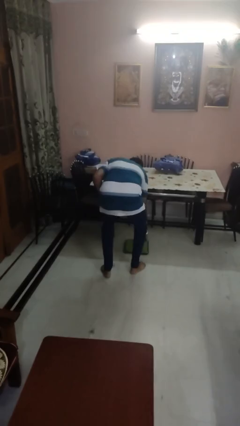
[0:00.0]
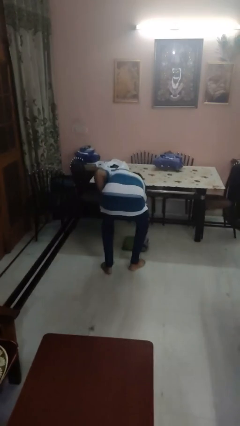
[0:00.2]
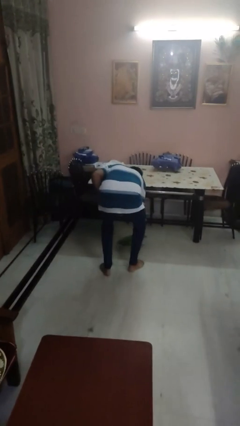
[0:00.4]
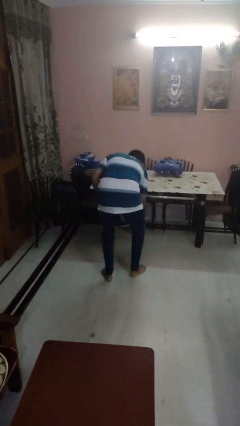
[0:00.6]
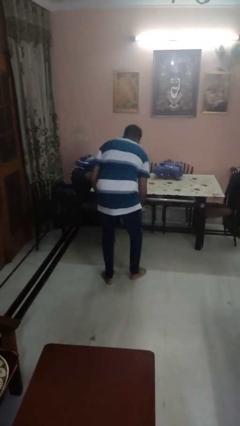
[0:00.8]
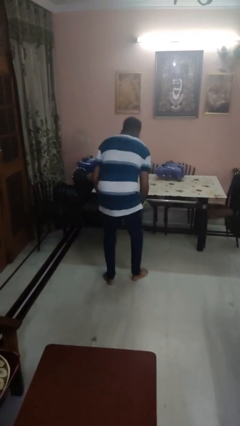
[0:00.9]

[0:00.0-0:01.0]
person picks up object from floor

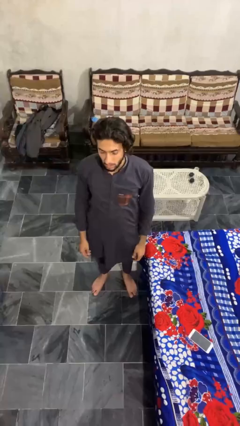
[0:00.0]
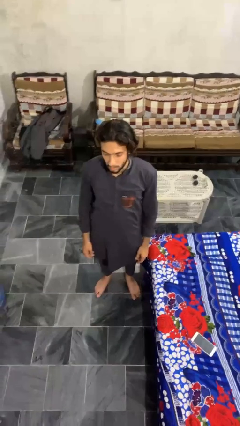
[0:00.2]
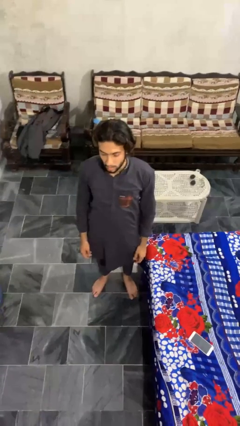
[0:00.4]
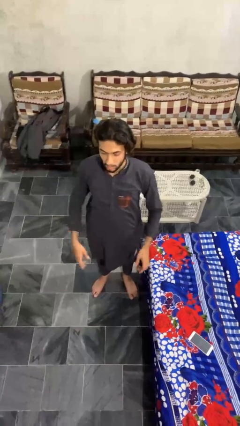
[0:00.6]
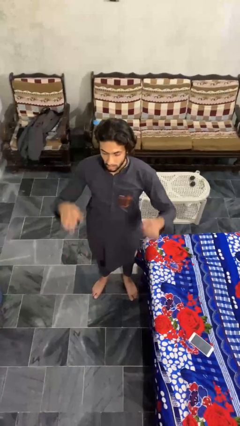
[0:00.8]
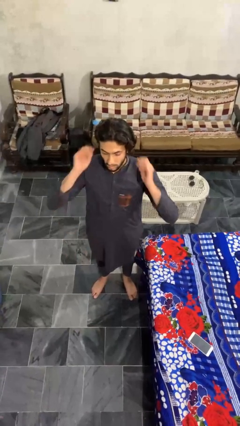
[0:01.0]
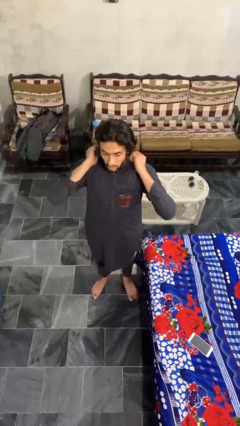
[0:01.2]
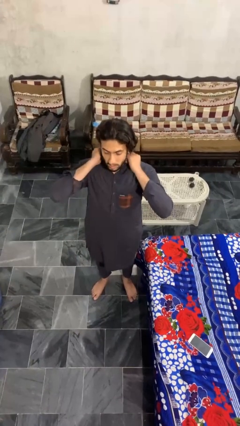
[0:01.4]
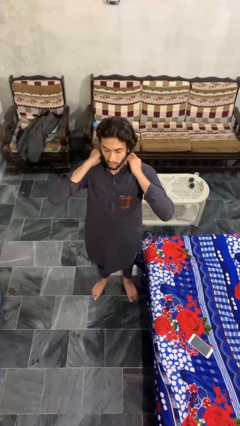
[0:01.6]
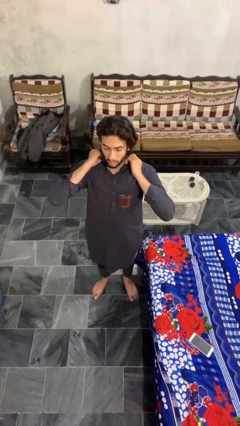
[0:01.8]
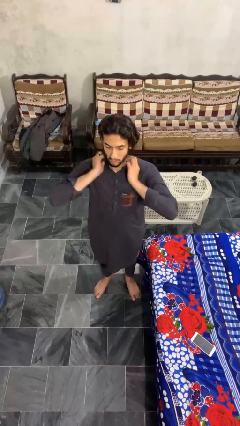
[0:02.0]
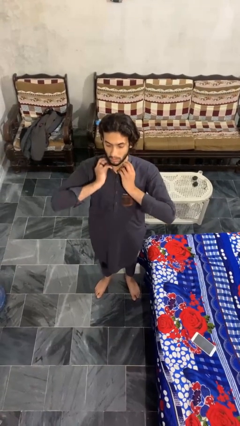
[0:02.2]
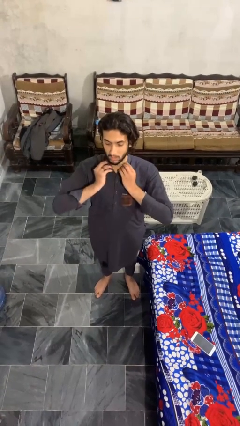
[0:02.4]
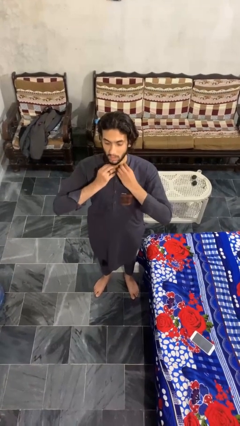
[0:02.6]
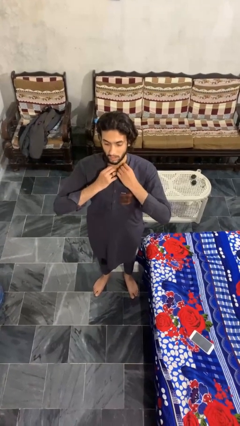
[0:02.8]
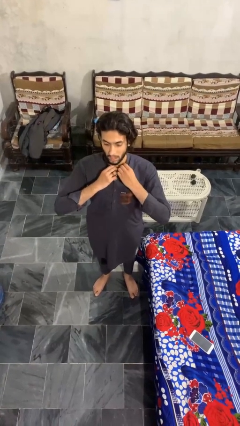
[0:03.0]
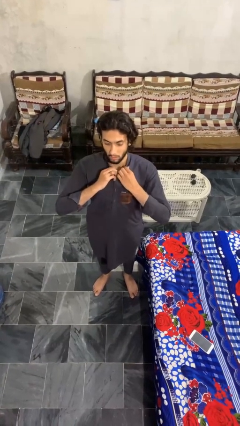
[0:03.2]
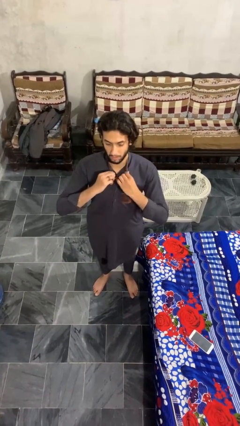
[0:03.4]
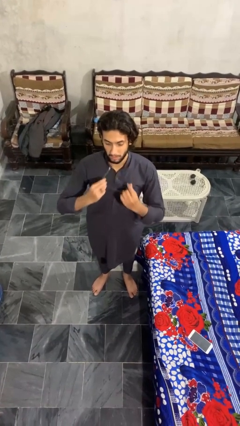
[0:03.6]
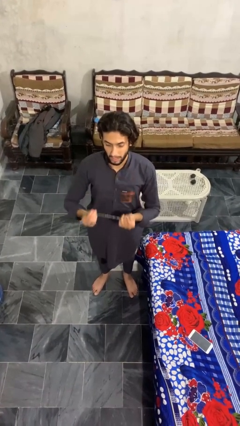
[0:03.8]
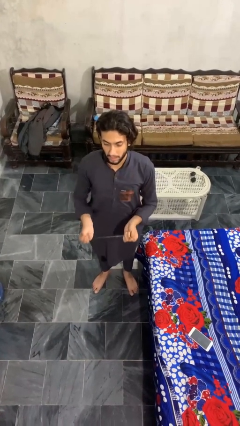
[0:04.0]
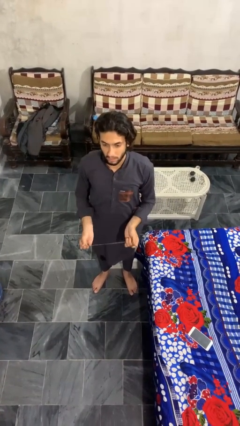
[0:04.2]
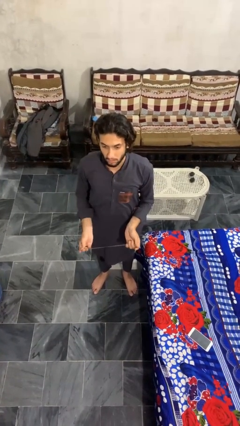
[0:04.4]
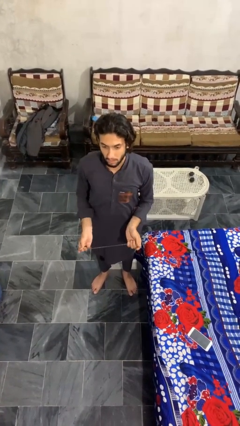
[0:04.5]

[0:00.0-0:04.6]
person takes off necklace

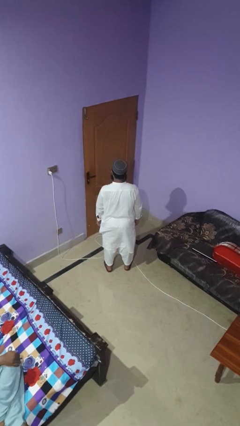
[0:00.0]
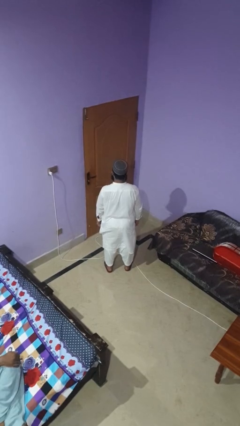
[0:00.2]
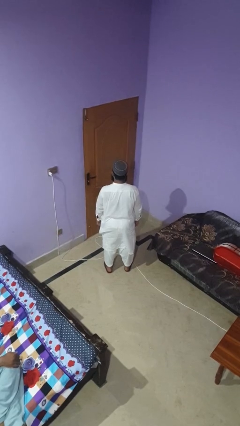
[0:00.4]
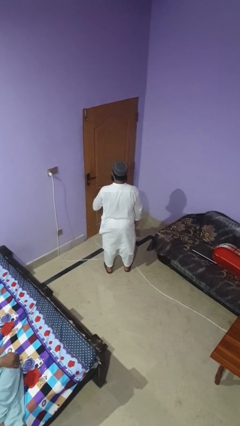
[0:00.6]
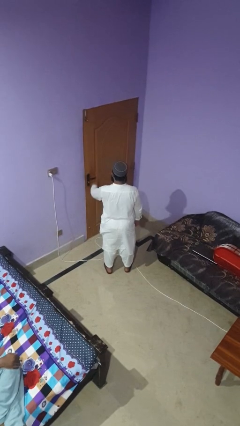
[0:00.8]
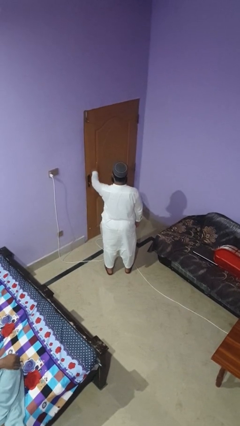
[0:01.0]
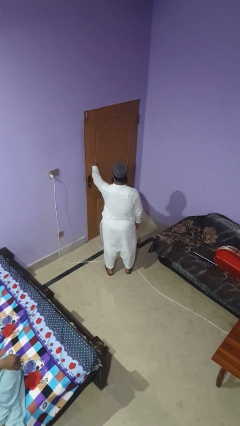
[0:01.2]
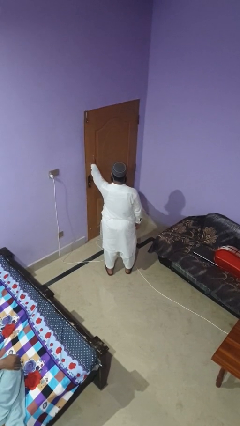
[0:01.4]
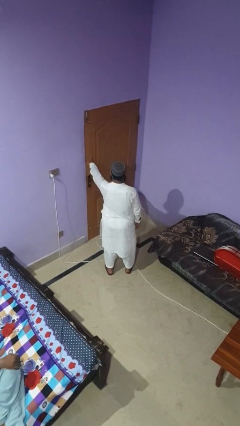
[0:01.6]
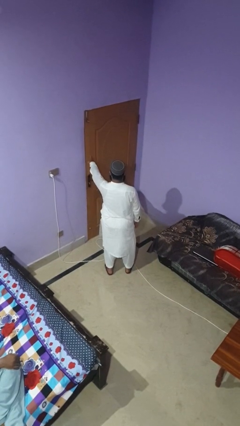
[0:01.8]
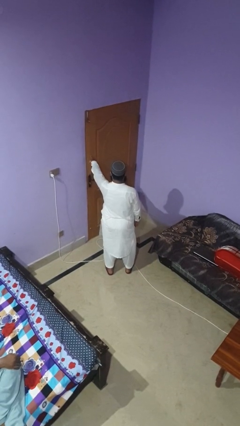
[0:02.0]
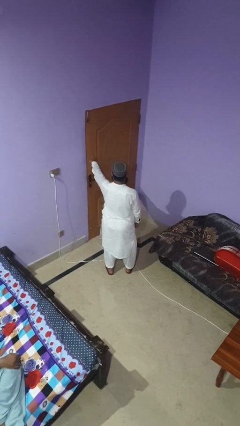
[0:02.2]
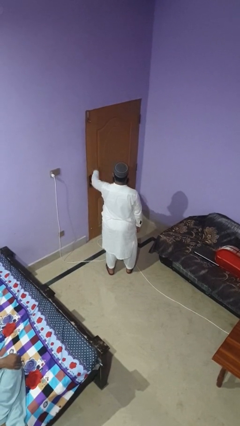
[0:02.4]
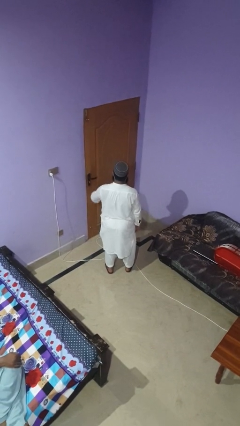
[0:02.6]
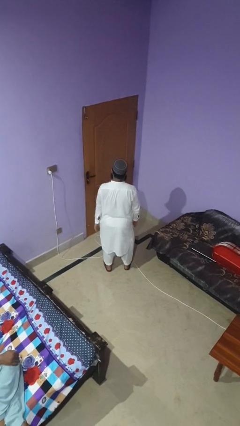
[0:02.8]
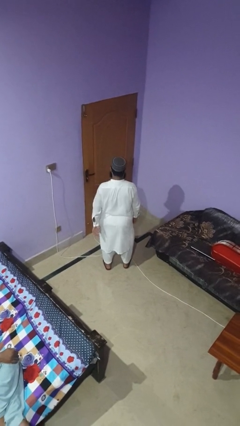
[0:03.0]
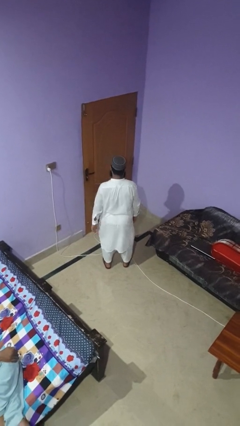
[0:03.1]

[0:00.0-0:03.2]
person taps object with finger

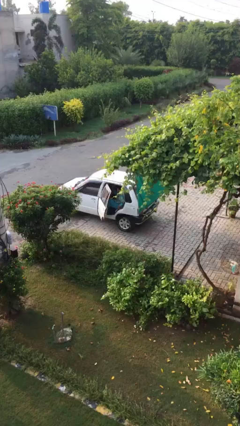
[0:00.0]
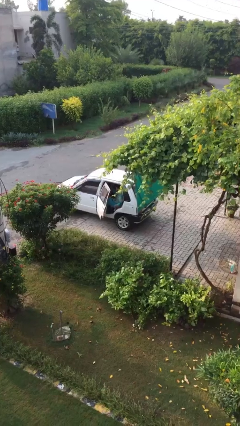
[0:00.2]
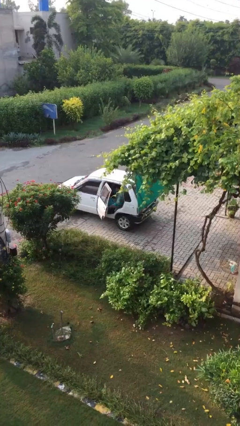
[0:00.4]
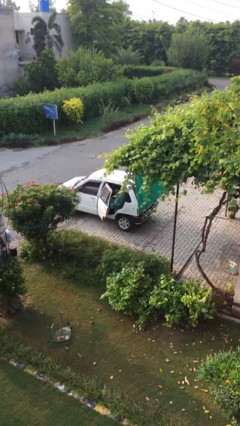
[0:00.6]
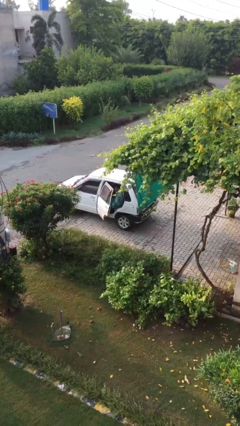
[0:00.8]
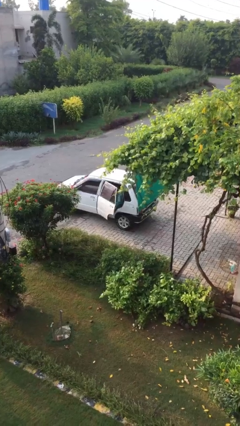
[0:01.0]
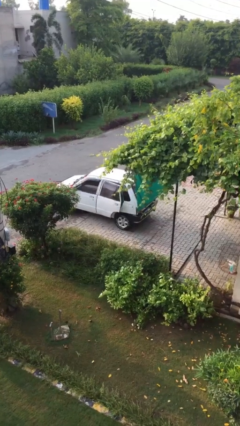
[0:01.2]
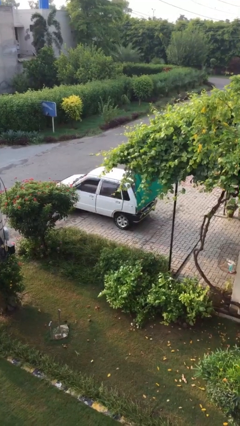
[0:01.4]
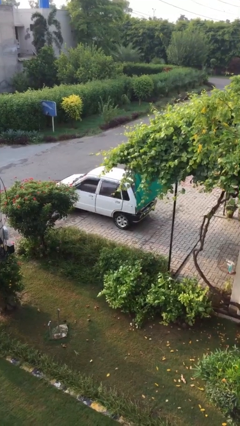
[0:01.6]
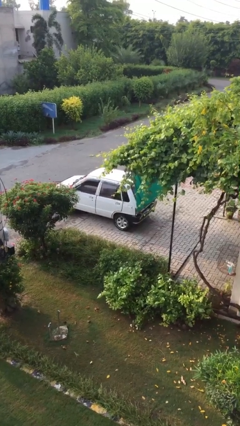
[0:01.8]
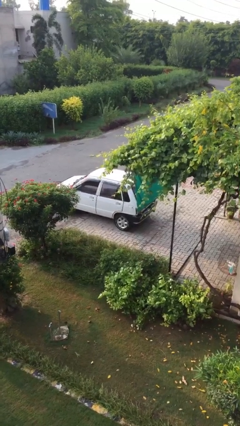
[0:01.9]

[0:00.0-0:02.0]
person closes car door

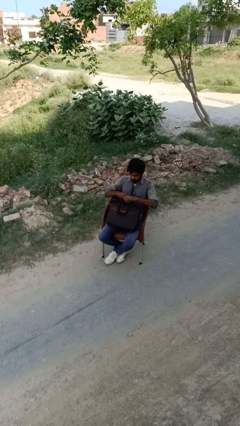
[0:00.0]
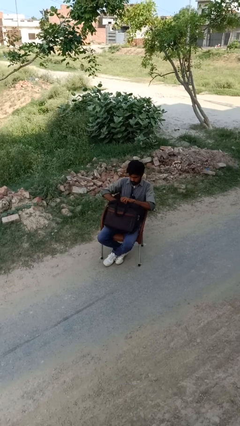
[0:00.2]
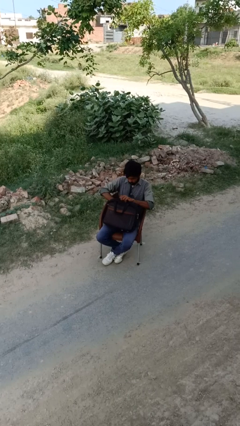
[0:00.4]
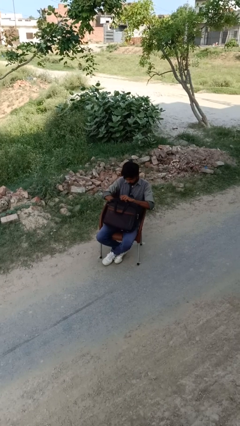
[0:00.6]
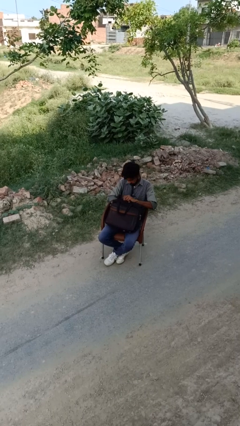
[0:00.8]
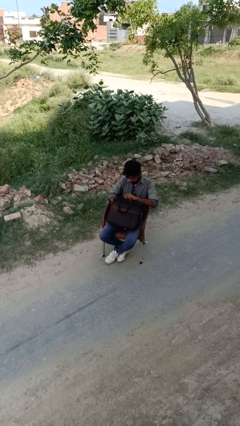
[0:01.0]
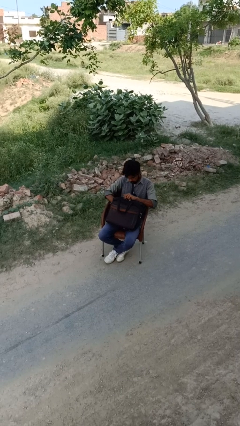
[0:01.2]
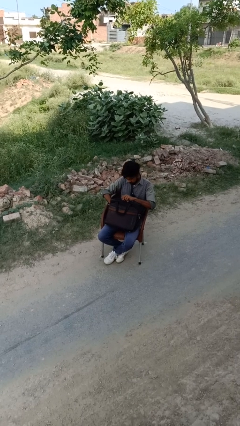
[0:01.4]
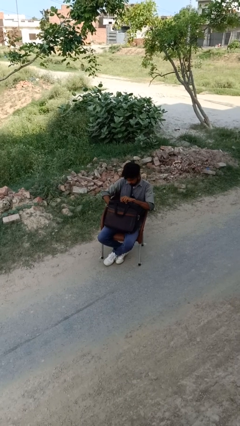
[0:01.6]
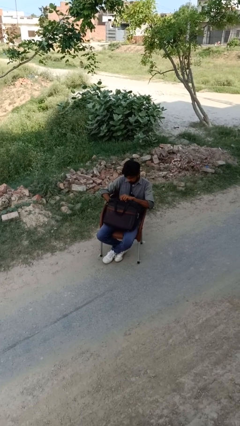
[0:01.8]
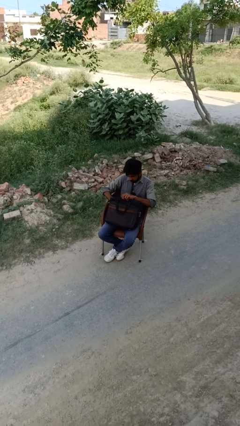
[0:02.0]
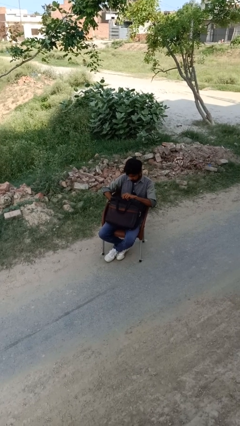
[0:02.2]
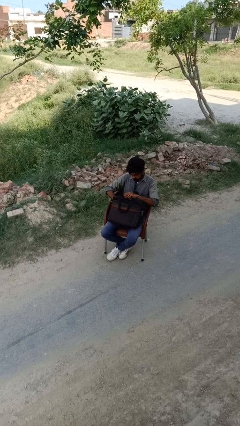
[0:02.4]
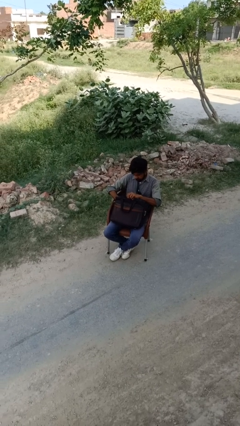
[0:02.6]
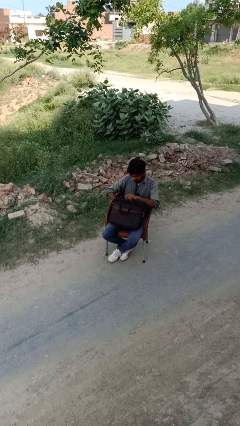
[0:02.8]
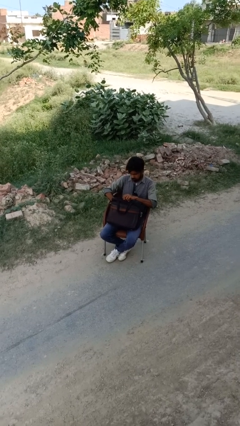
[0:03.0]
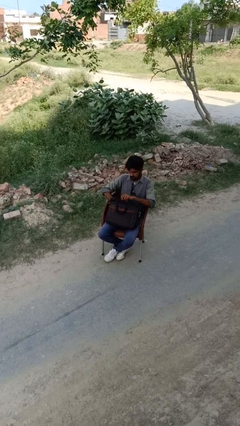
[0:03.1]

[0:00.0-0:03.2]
person searches in backpack

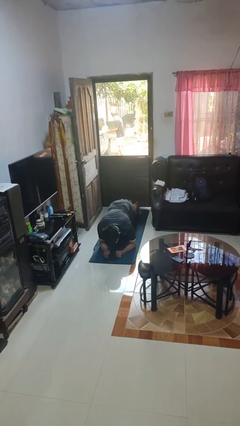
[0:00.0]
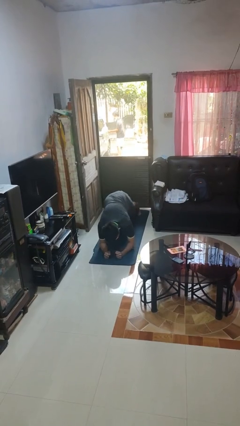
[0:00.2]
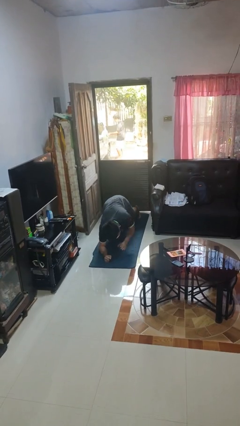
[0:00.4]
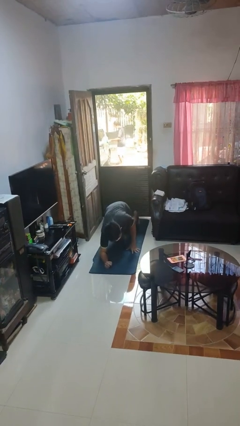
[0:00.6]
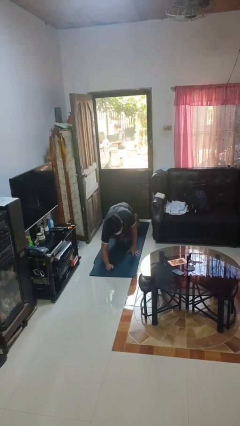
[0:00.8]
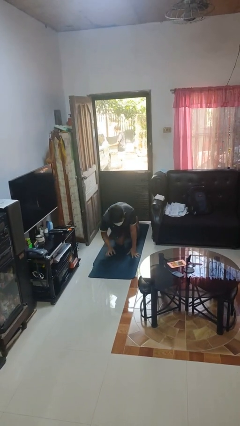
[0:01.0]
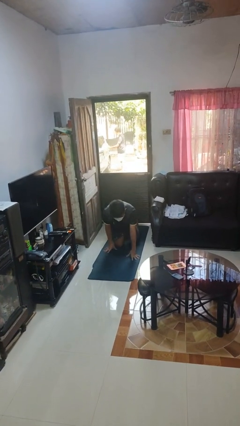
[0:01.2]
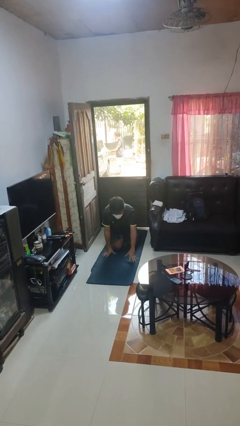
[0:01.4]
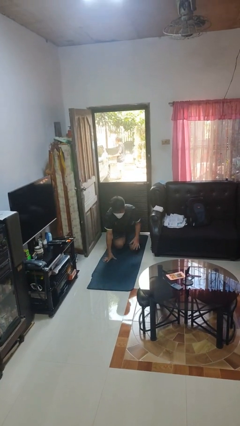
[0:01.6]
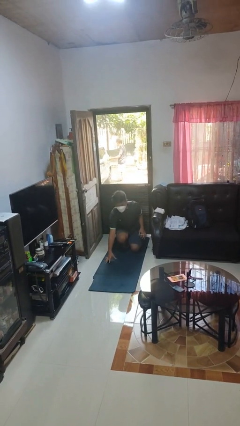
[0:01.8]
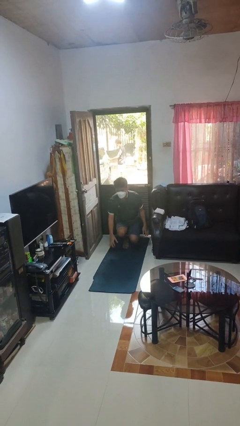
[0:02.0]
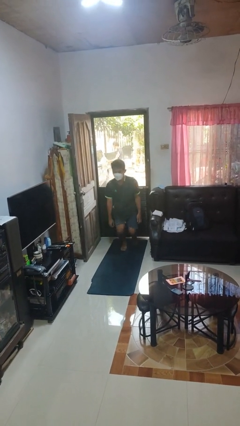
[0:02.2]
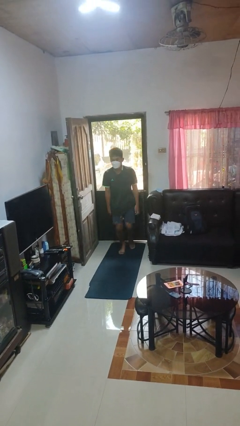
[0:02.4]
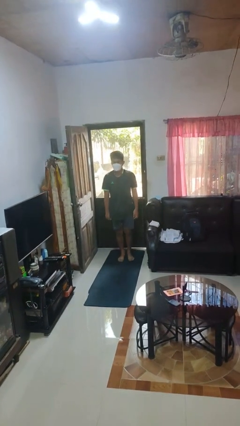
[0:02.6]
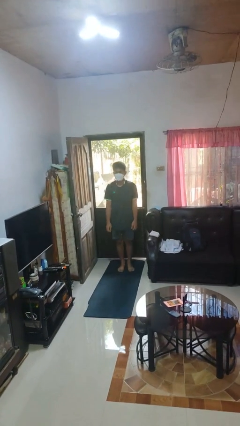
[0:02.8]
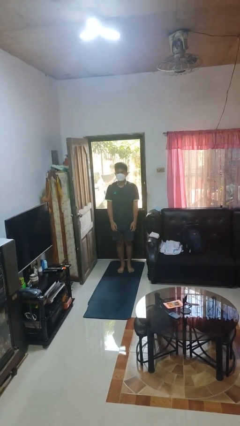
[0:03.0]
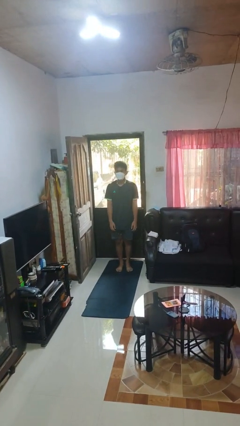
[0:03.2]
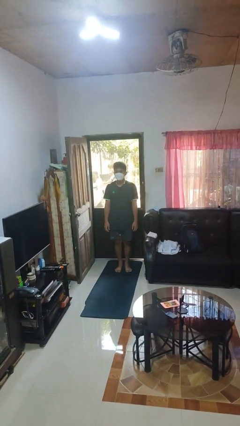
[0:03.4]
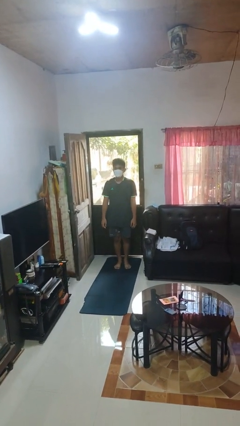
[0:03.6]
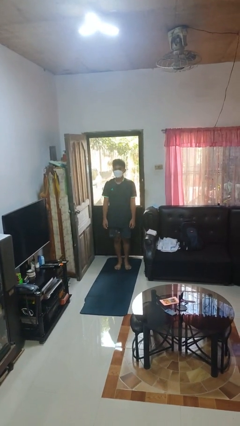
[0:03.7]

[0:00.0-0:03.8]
person stands up from floor
